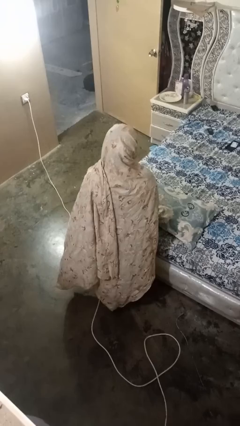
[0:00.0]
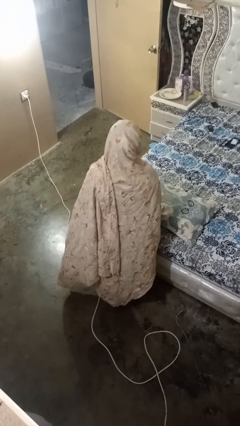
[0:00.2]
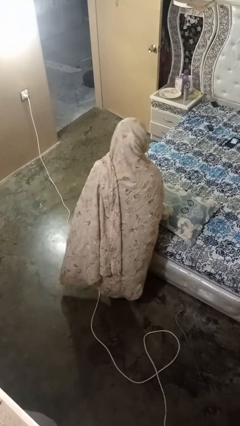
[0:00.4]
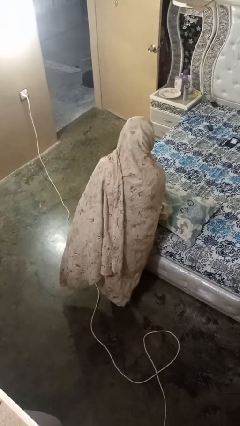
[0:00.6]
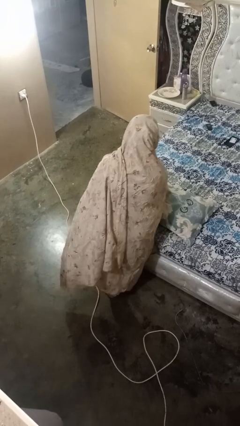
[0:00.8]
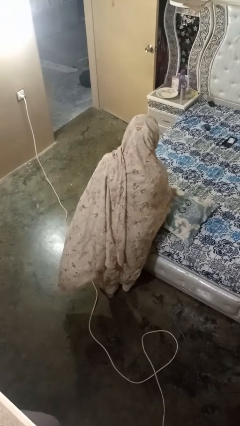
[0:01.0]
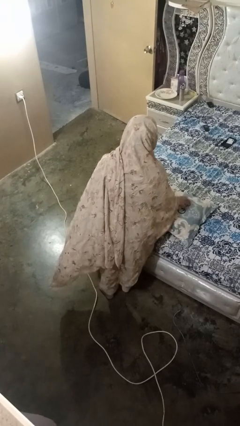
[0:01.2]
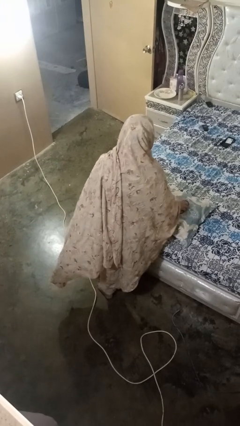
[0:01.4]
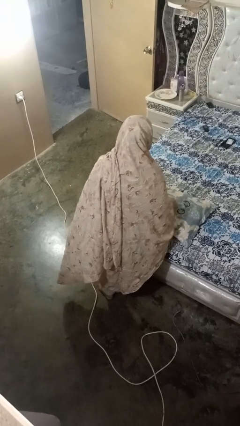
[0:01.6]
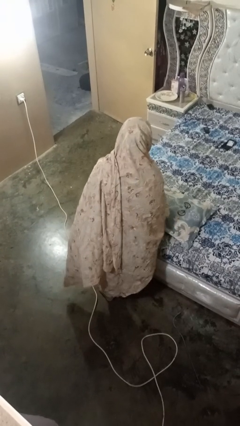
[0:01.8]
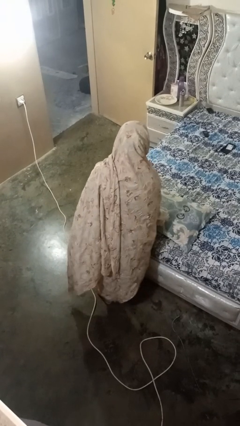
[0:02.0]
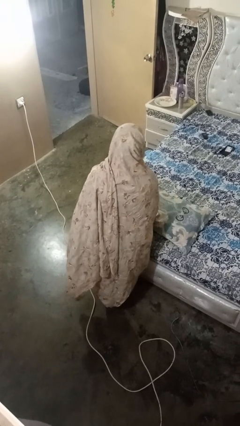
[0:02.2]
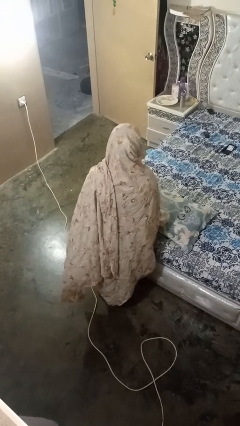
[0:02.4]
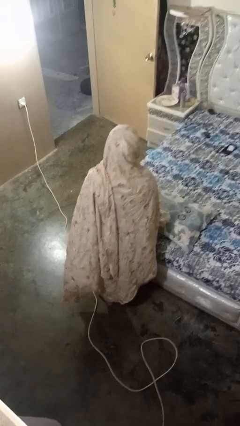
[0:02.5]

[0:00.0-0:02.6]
person taps object with finger

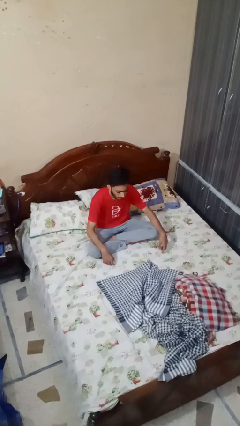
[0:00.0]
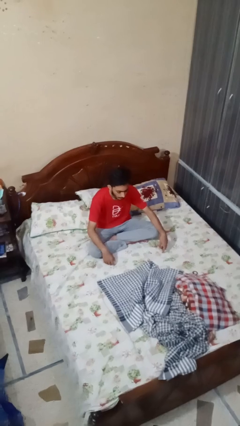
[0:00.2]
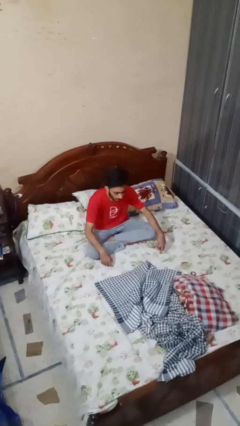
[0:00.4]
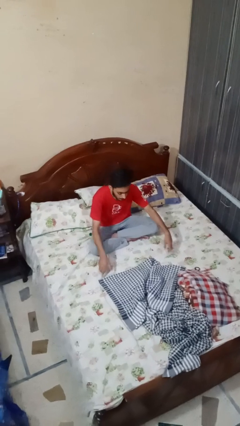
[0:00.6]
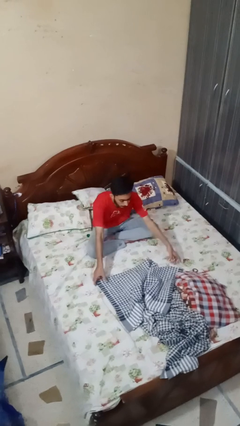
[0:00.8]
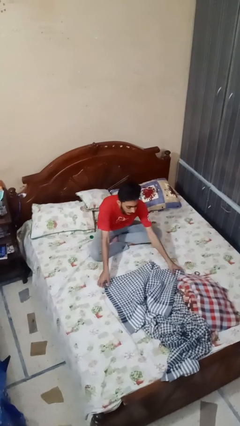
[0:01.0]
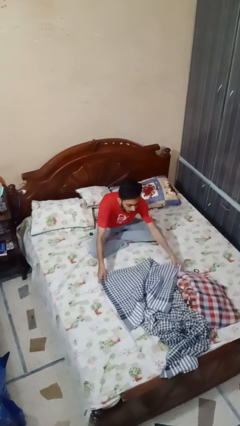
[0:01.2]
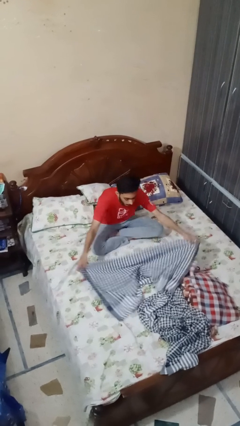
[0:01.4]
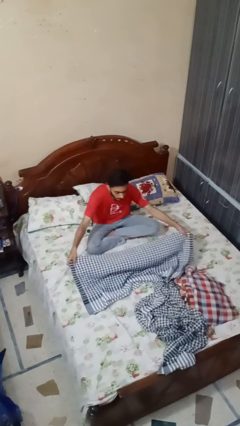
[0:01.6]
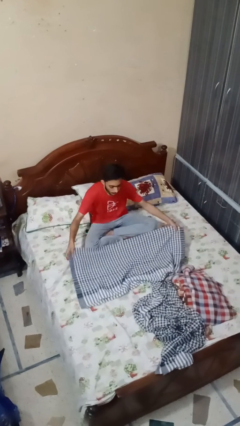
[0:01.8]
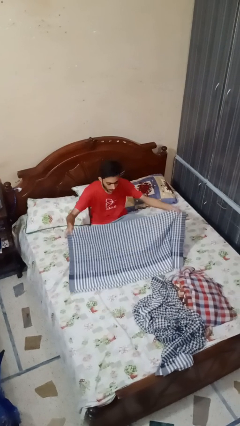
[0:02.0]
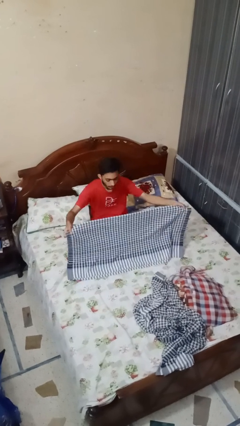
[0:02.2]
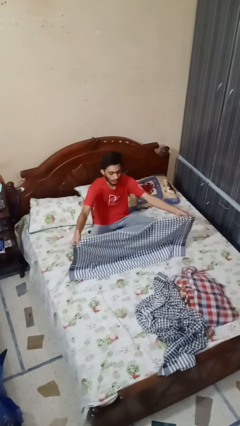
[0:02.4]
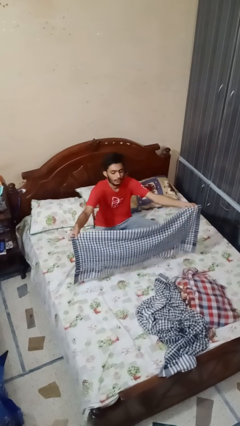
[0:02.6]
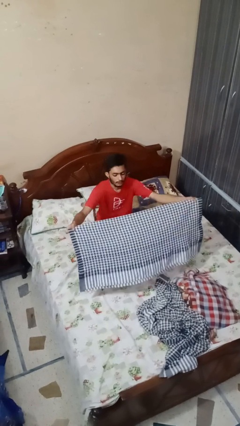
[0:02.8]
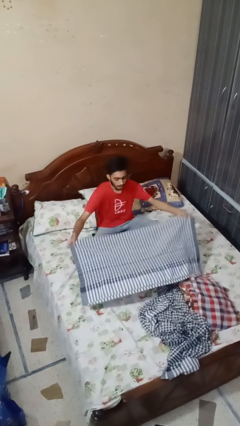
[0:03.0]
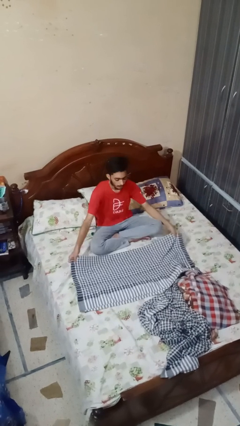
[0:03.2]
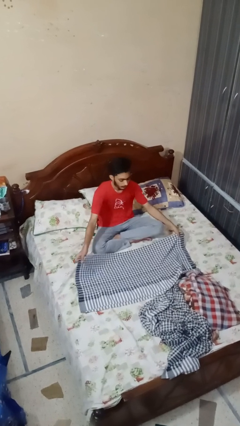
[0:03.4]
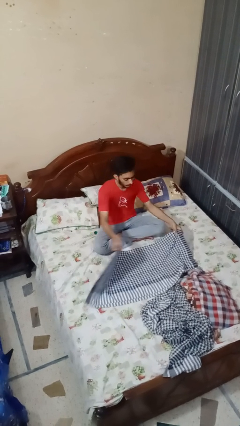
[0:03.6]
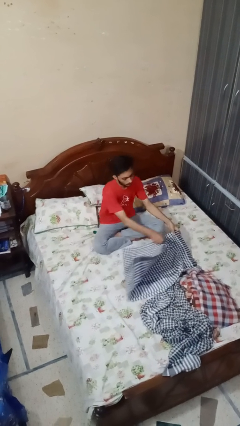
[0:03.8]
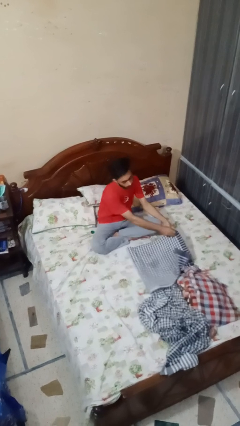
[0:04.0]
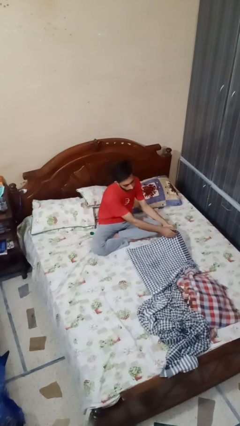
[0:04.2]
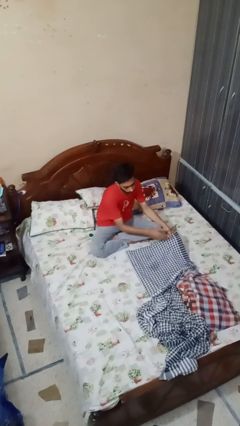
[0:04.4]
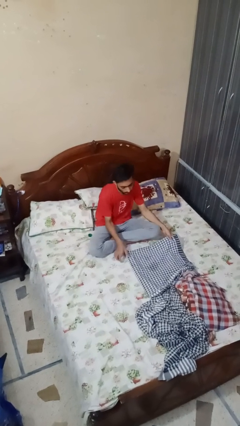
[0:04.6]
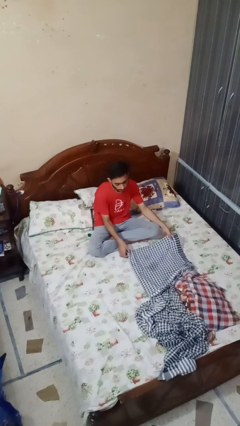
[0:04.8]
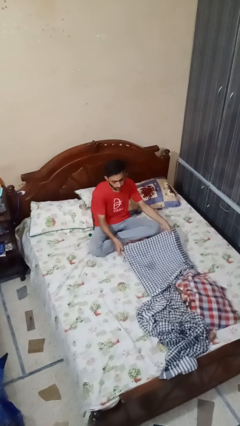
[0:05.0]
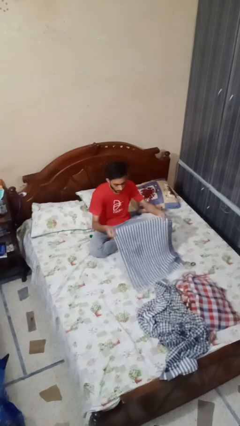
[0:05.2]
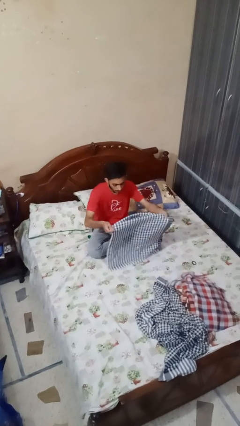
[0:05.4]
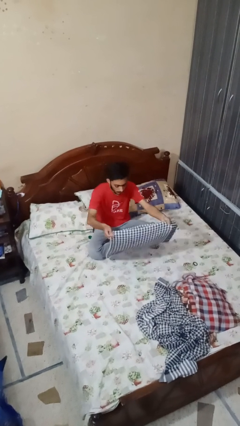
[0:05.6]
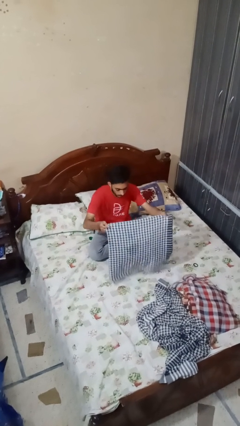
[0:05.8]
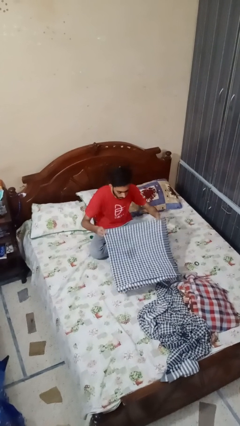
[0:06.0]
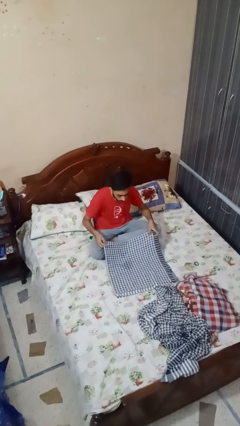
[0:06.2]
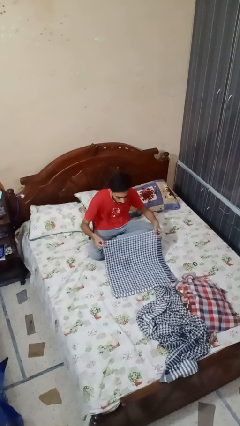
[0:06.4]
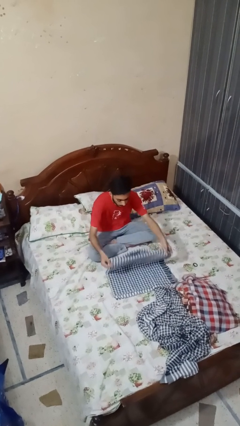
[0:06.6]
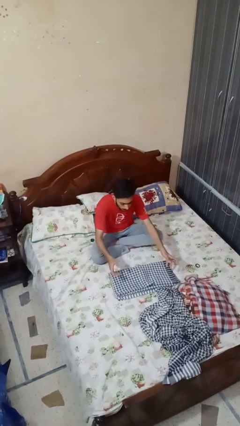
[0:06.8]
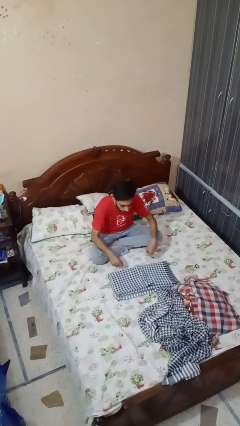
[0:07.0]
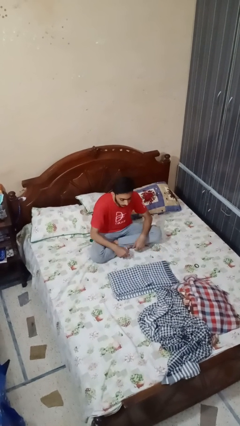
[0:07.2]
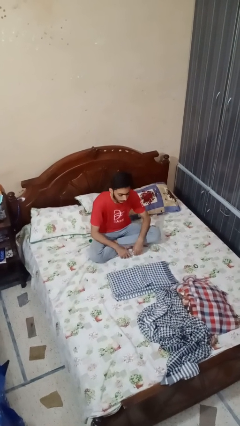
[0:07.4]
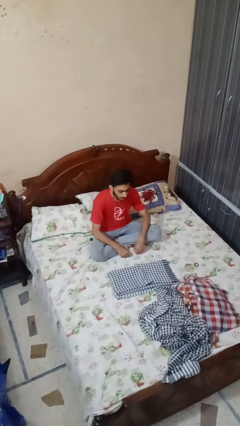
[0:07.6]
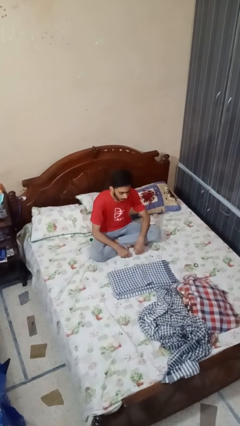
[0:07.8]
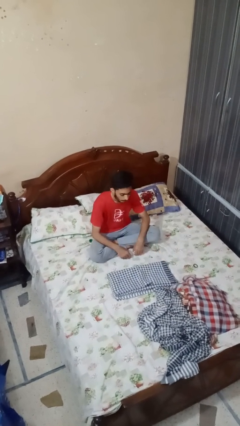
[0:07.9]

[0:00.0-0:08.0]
person folds blanket

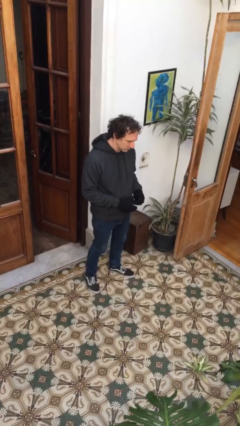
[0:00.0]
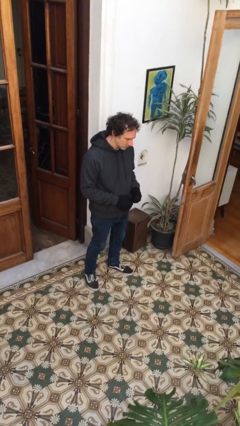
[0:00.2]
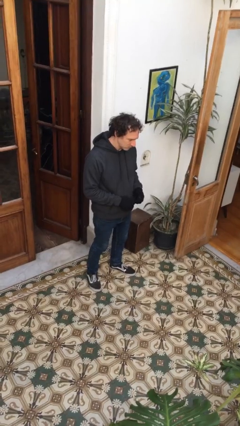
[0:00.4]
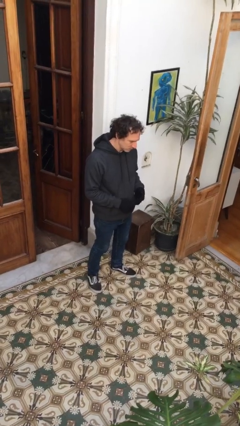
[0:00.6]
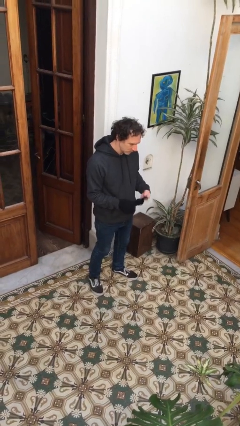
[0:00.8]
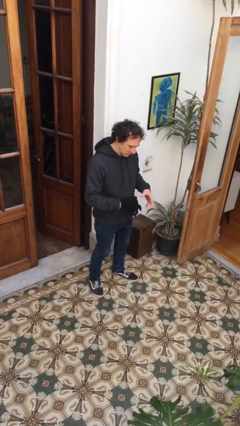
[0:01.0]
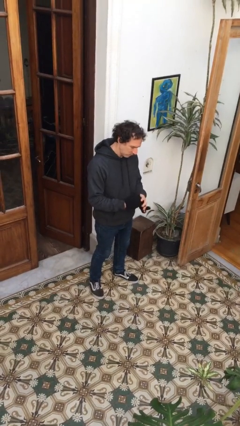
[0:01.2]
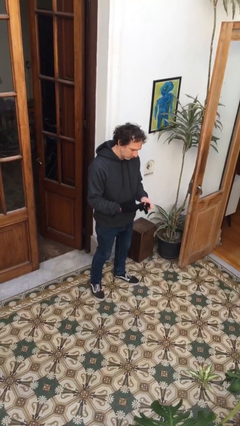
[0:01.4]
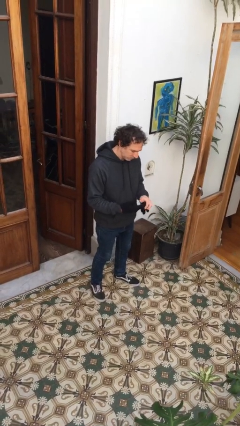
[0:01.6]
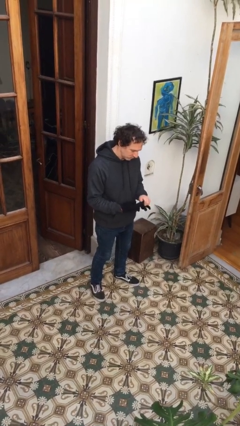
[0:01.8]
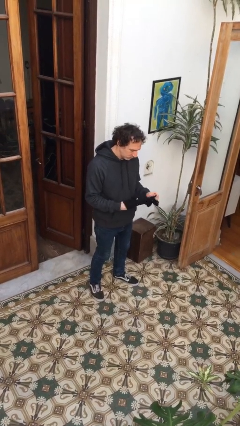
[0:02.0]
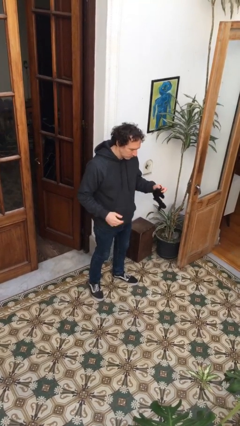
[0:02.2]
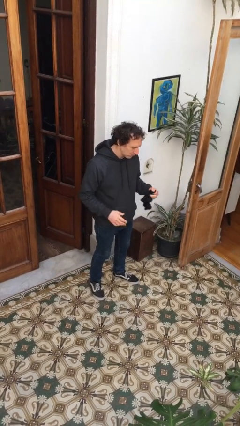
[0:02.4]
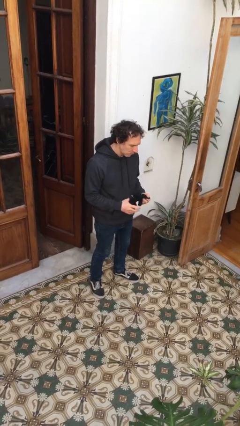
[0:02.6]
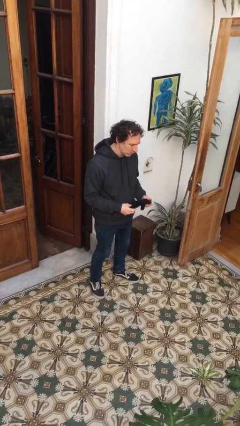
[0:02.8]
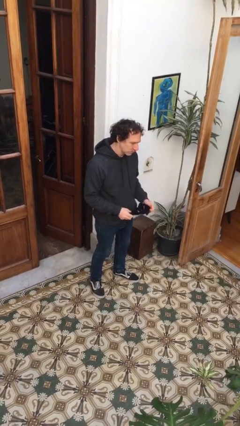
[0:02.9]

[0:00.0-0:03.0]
person takes off gloves

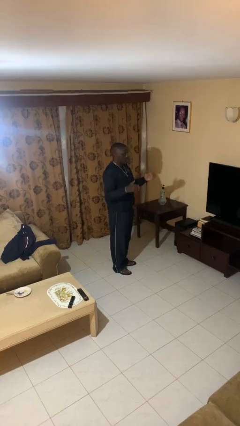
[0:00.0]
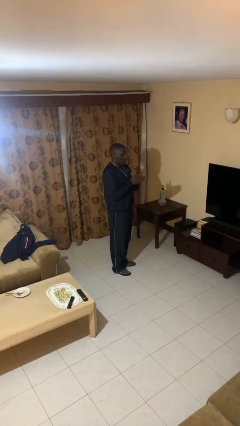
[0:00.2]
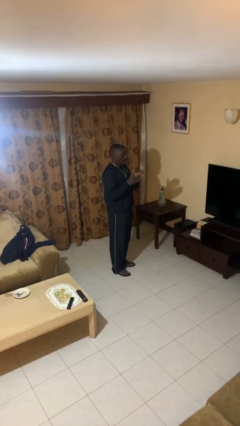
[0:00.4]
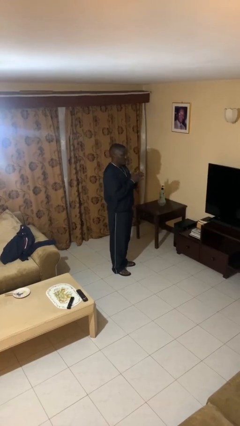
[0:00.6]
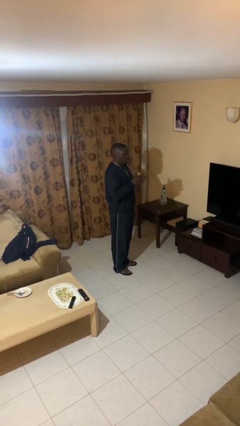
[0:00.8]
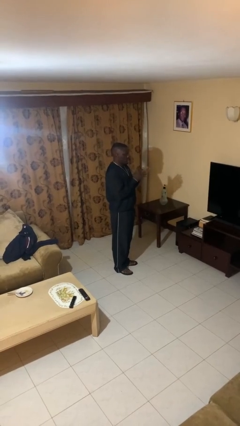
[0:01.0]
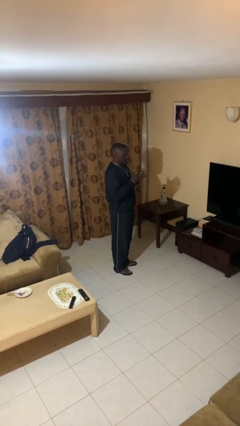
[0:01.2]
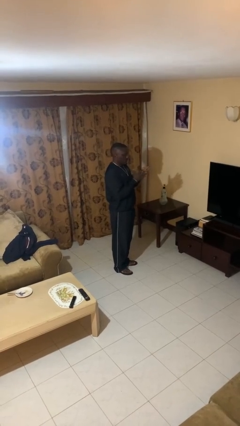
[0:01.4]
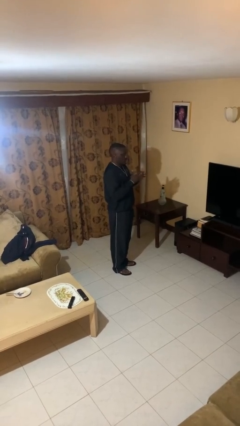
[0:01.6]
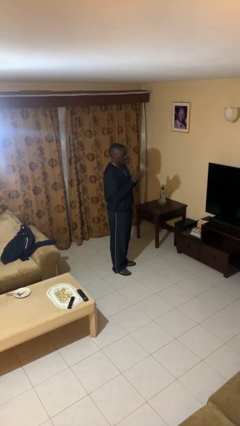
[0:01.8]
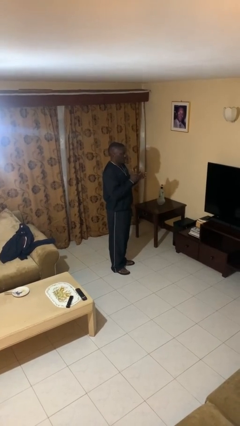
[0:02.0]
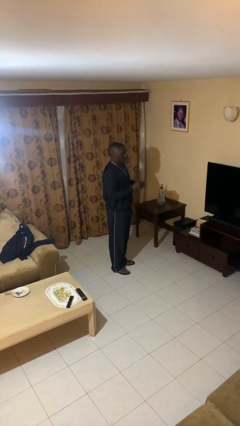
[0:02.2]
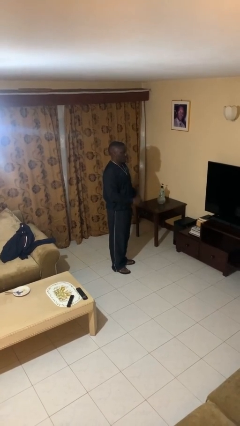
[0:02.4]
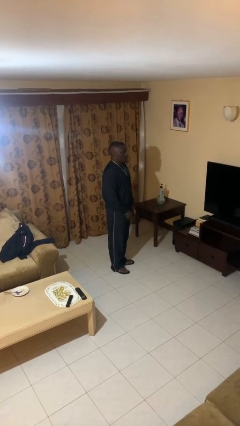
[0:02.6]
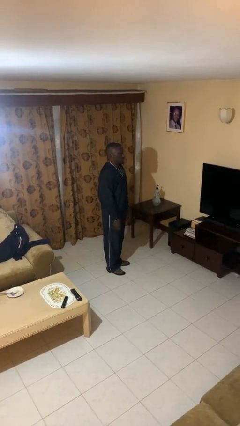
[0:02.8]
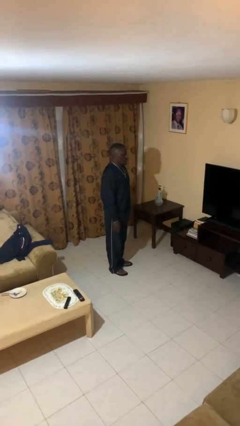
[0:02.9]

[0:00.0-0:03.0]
person claps hands

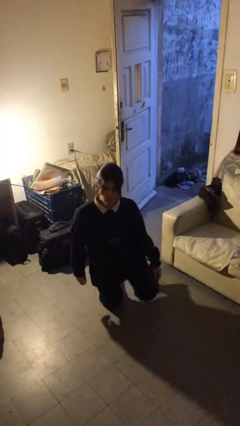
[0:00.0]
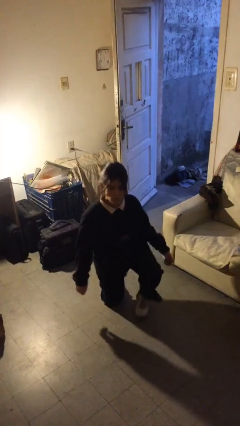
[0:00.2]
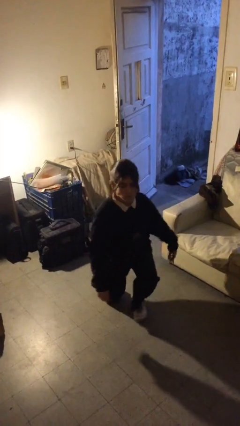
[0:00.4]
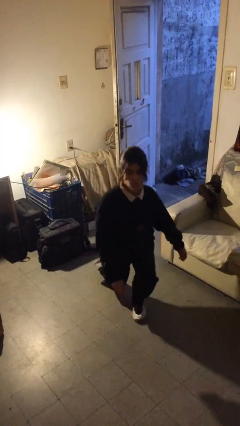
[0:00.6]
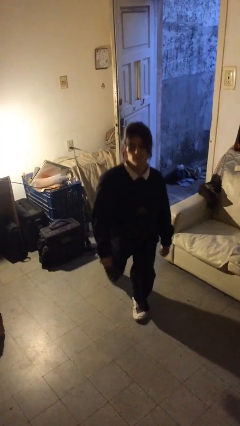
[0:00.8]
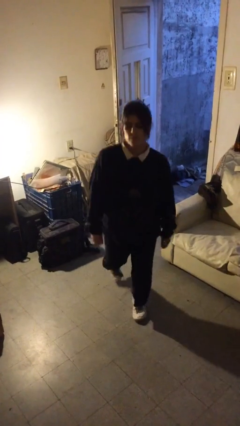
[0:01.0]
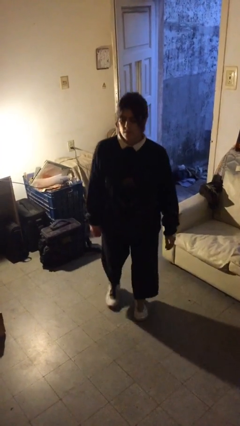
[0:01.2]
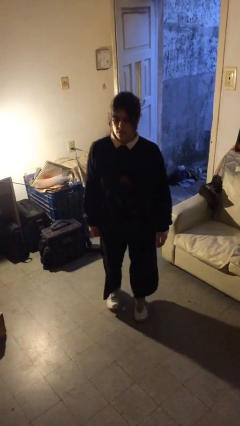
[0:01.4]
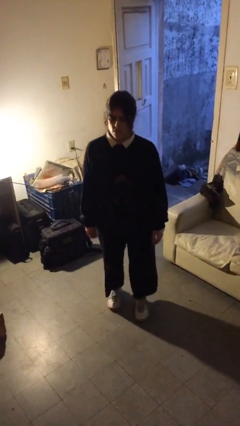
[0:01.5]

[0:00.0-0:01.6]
person stands up from floor
